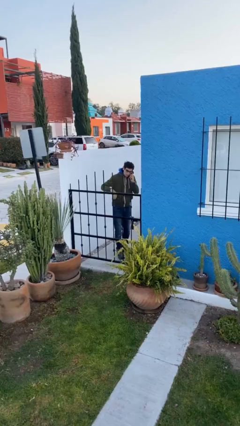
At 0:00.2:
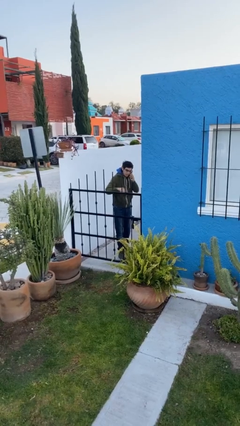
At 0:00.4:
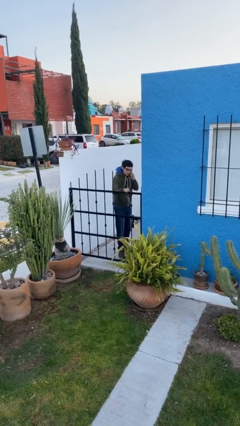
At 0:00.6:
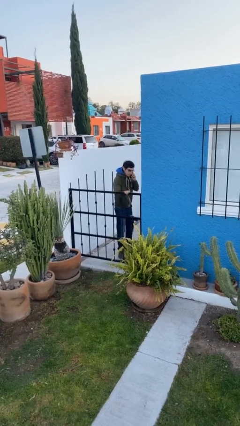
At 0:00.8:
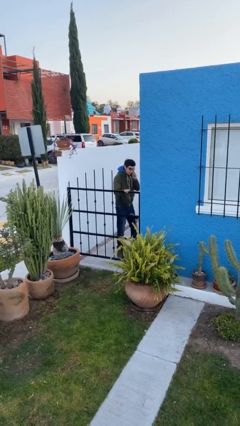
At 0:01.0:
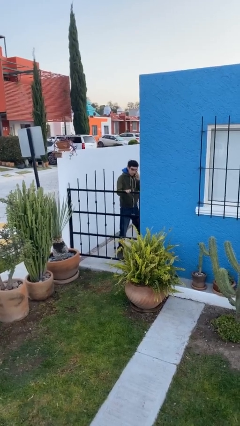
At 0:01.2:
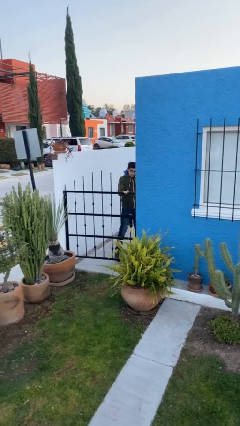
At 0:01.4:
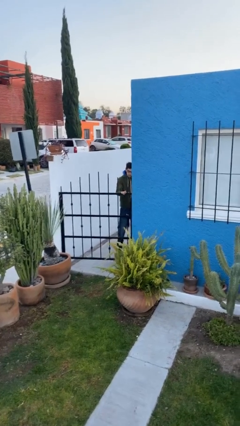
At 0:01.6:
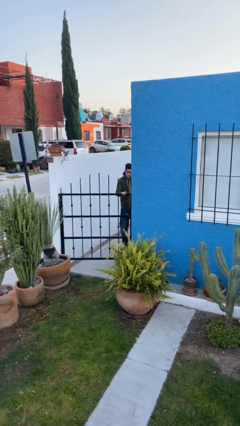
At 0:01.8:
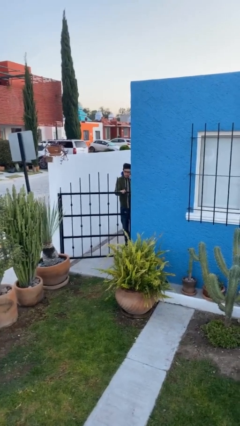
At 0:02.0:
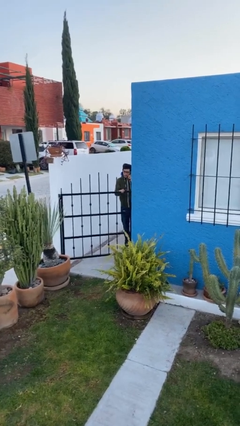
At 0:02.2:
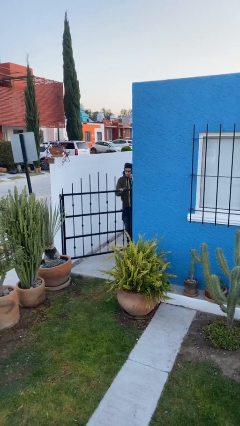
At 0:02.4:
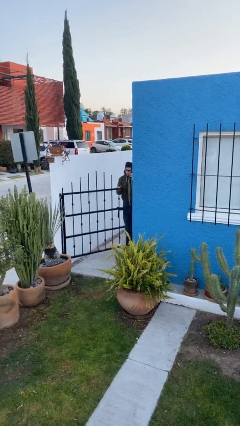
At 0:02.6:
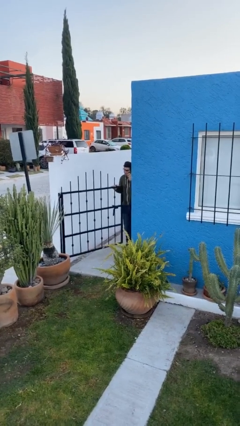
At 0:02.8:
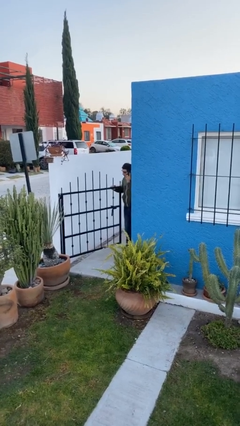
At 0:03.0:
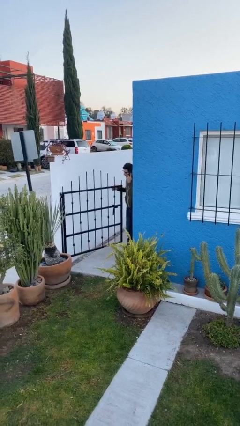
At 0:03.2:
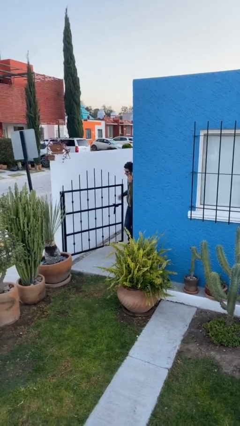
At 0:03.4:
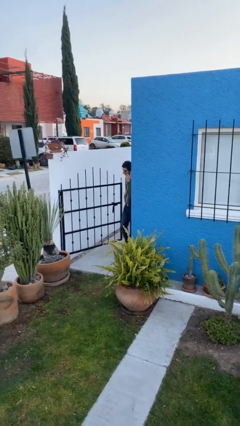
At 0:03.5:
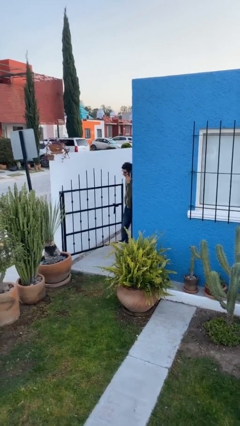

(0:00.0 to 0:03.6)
person opens facility door

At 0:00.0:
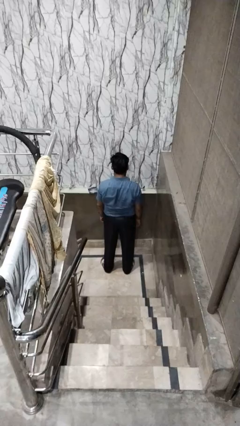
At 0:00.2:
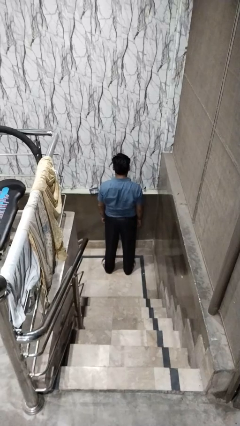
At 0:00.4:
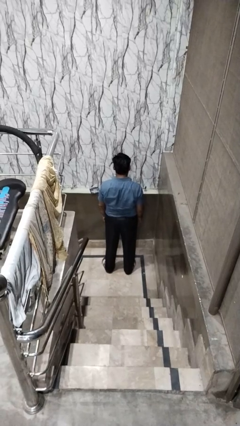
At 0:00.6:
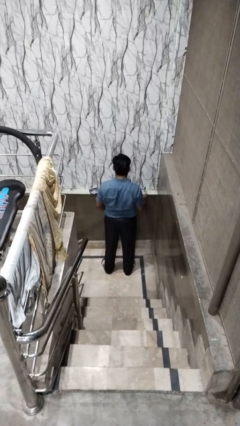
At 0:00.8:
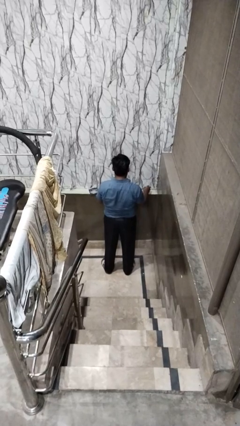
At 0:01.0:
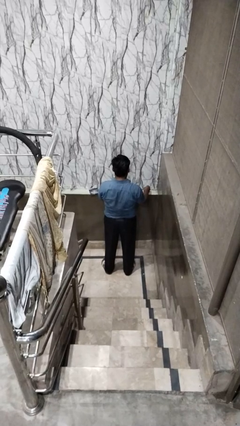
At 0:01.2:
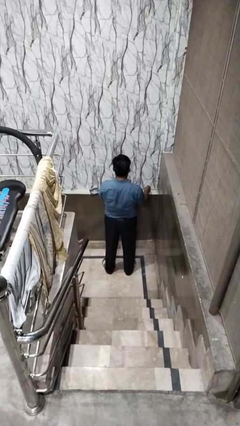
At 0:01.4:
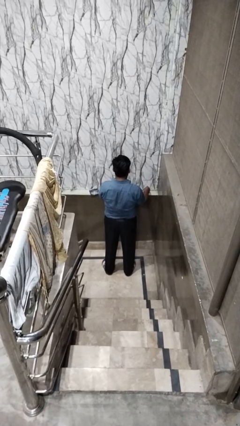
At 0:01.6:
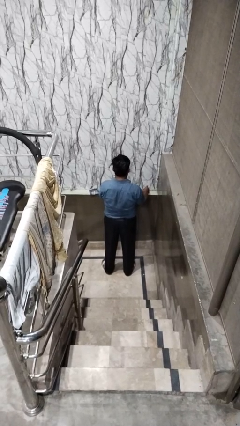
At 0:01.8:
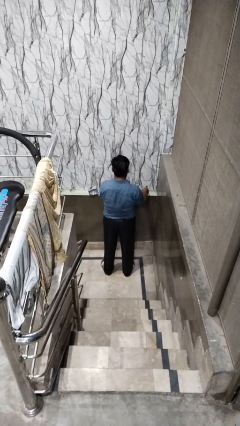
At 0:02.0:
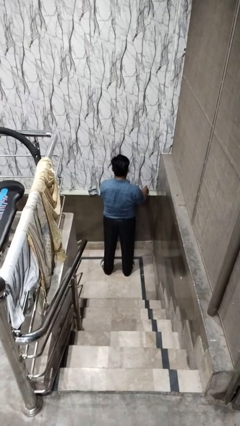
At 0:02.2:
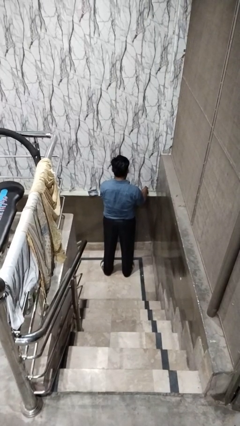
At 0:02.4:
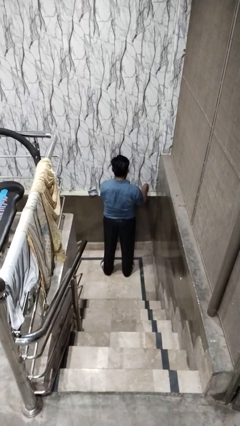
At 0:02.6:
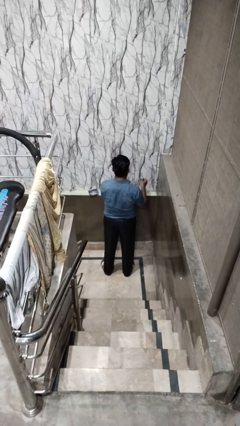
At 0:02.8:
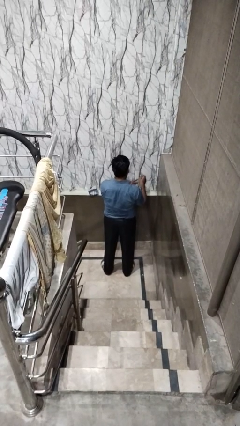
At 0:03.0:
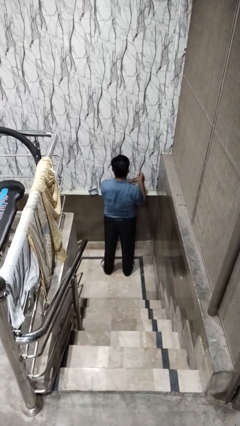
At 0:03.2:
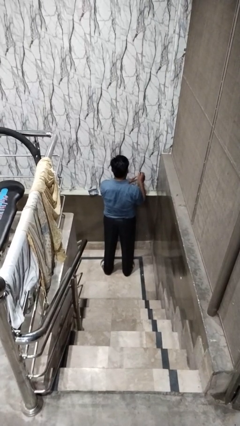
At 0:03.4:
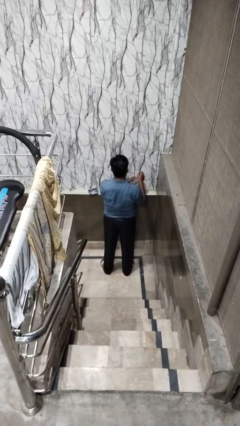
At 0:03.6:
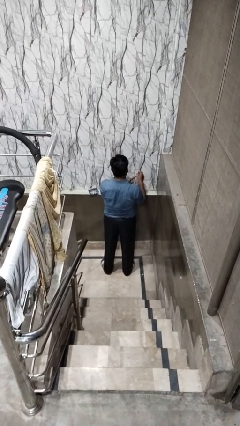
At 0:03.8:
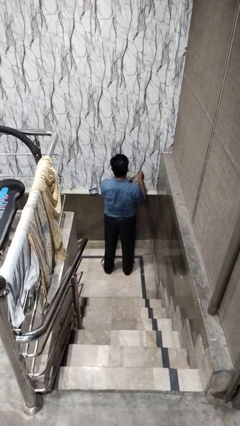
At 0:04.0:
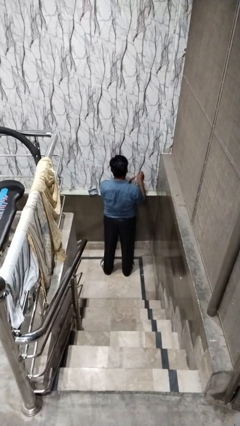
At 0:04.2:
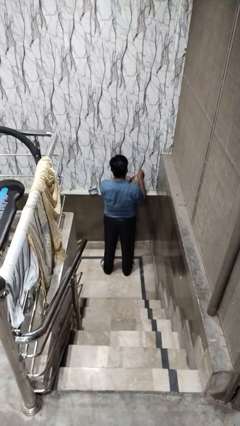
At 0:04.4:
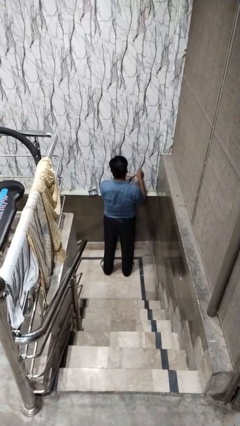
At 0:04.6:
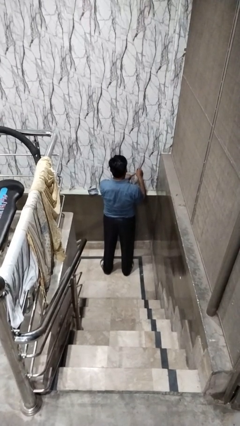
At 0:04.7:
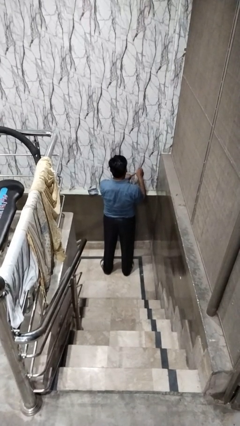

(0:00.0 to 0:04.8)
person paints fingernails

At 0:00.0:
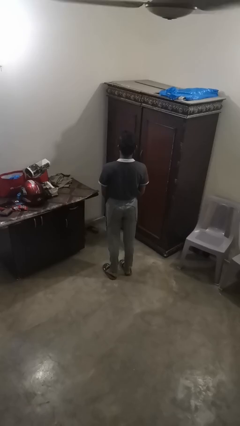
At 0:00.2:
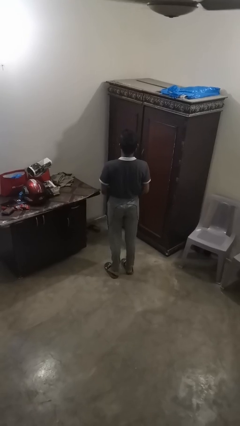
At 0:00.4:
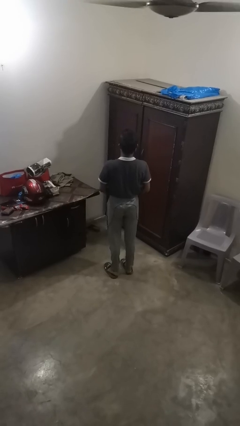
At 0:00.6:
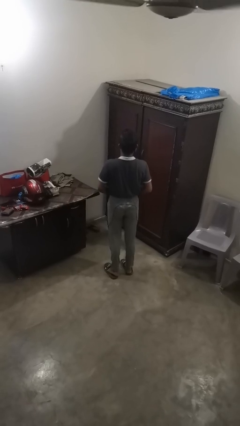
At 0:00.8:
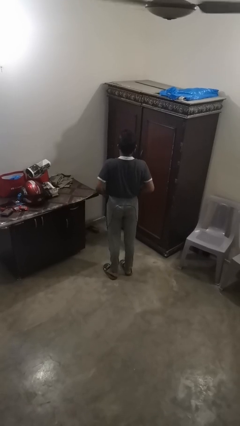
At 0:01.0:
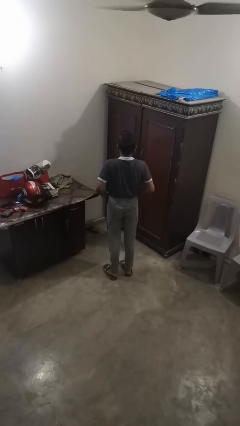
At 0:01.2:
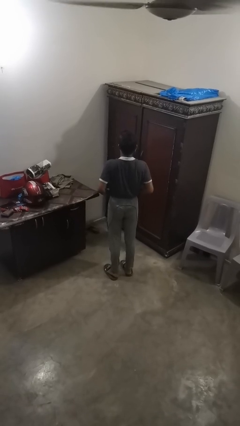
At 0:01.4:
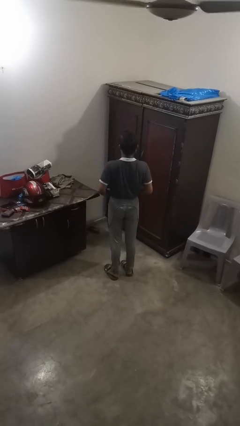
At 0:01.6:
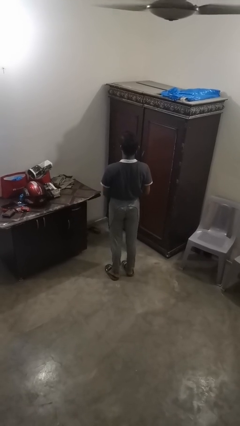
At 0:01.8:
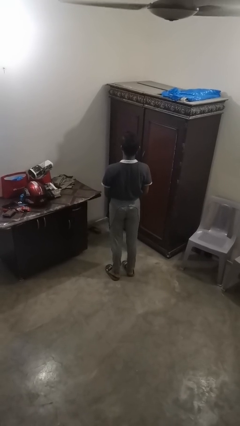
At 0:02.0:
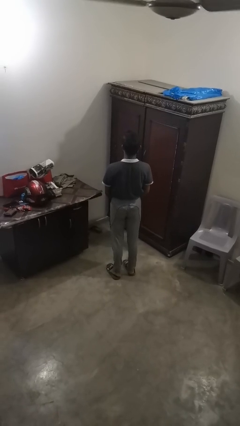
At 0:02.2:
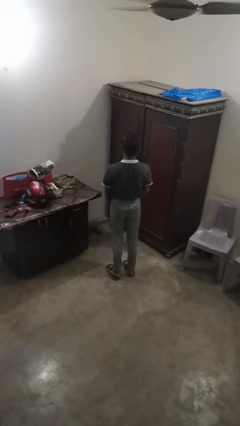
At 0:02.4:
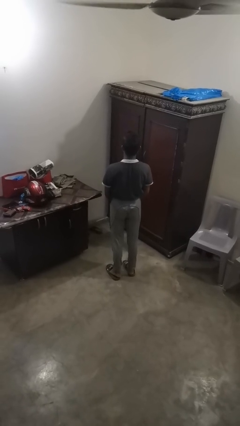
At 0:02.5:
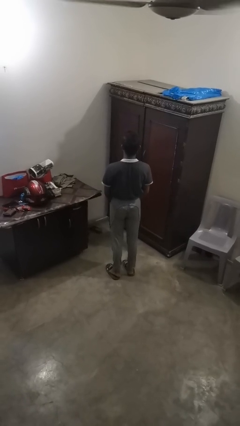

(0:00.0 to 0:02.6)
person hikes up pants

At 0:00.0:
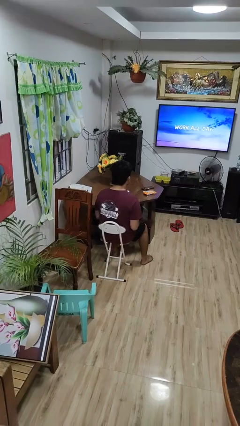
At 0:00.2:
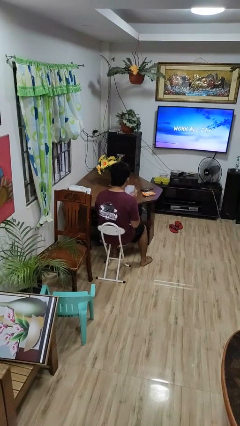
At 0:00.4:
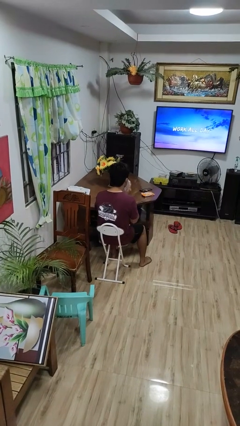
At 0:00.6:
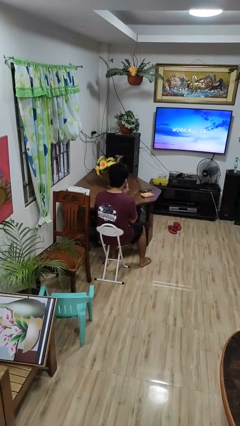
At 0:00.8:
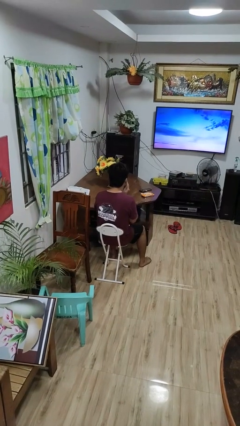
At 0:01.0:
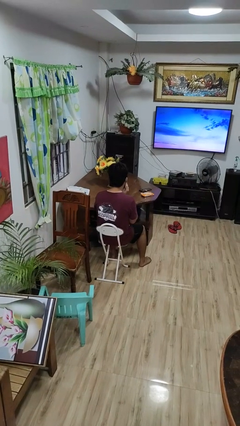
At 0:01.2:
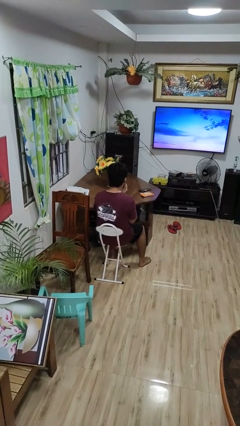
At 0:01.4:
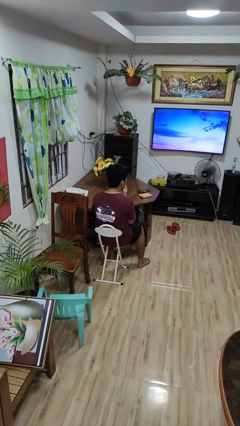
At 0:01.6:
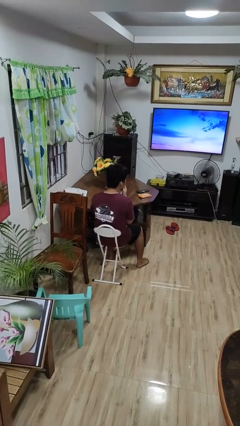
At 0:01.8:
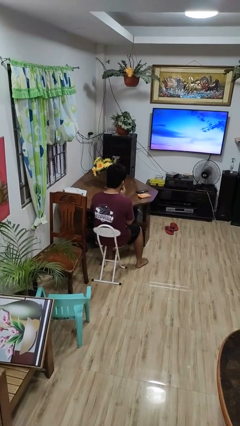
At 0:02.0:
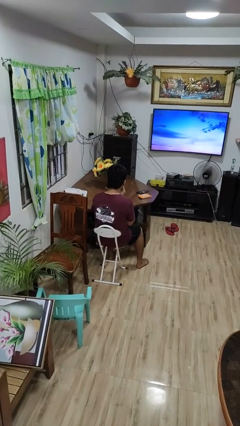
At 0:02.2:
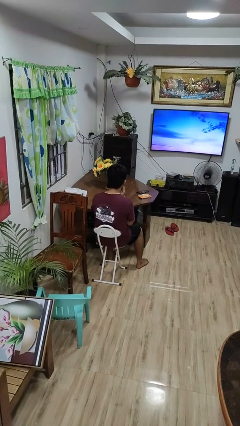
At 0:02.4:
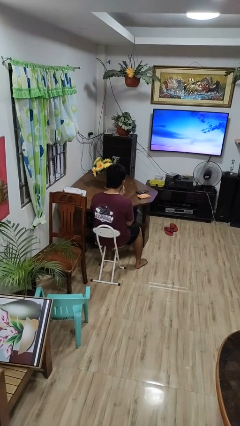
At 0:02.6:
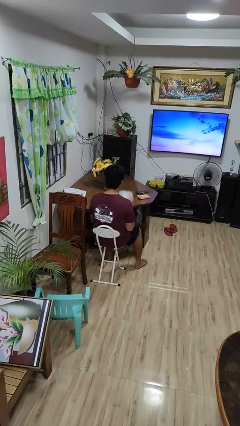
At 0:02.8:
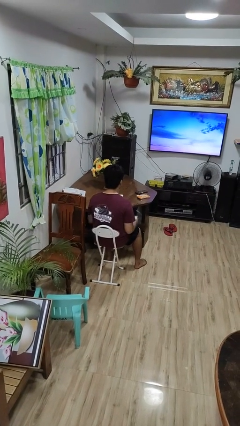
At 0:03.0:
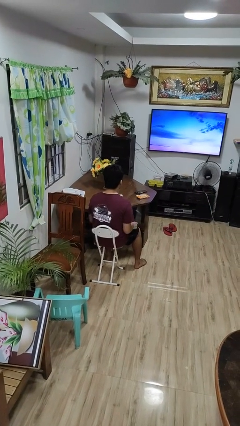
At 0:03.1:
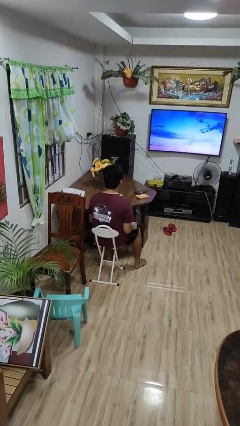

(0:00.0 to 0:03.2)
person wipes mouth with napkin

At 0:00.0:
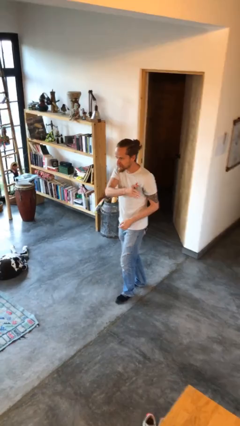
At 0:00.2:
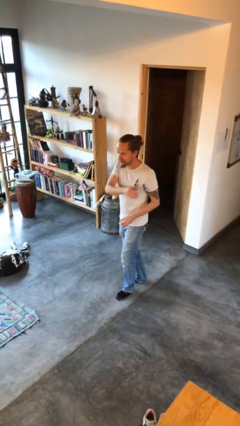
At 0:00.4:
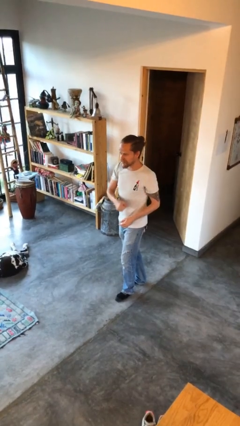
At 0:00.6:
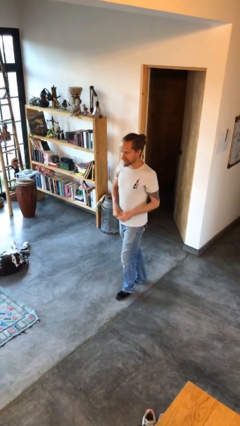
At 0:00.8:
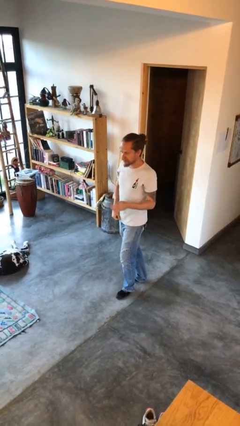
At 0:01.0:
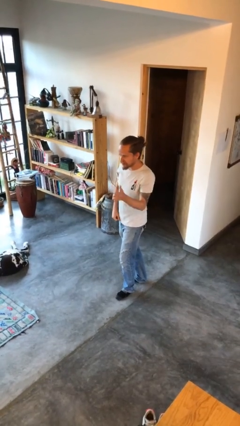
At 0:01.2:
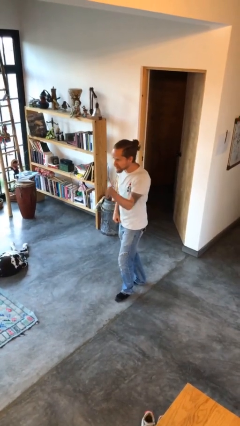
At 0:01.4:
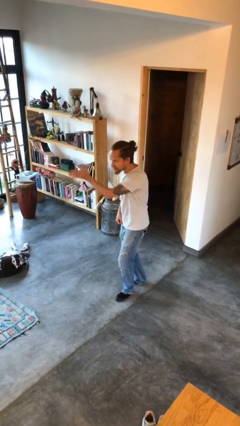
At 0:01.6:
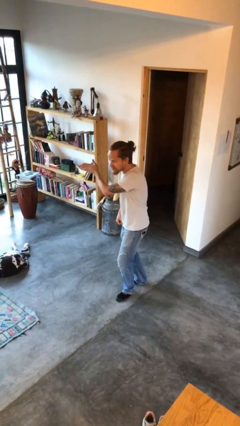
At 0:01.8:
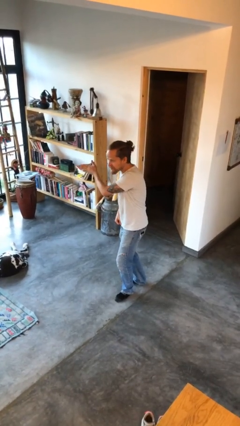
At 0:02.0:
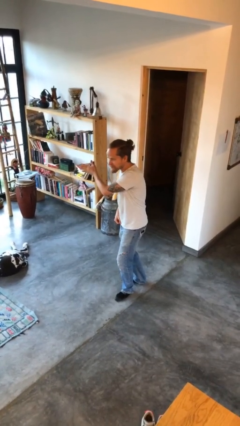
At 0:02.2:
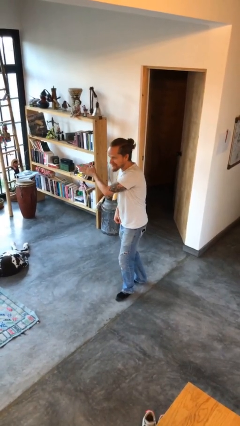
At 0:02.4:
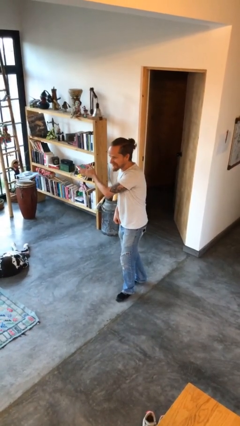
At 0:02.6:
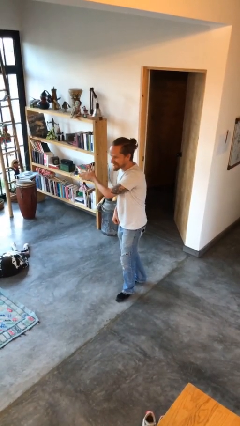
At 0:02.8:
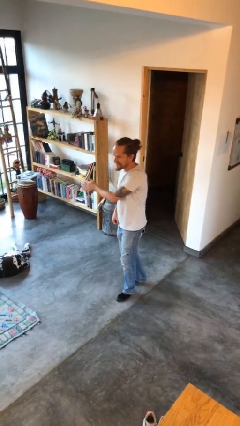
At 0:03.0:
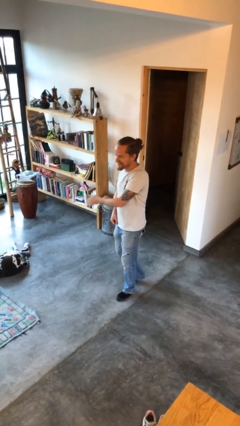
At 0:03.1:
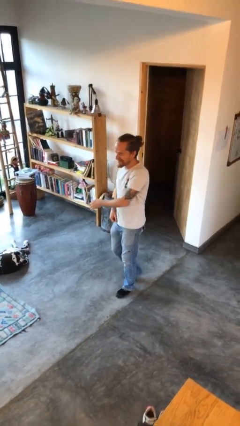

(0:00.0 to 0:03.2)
person gestures swipe right
